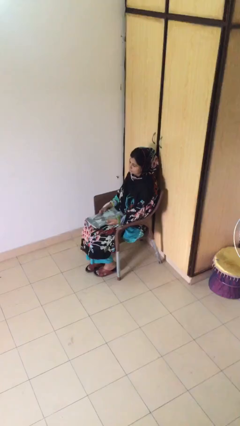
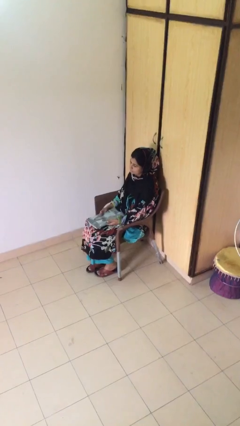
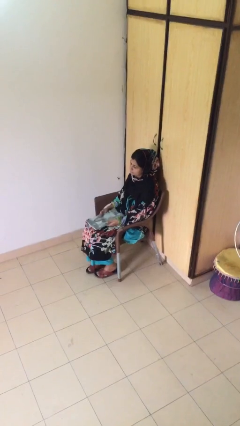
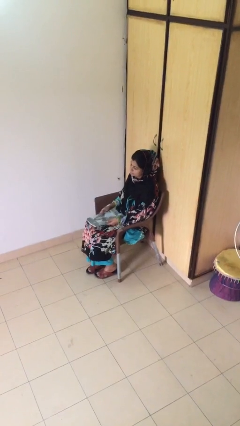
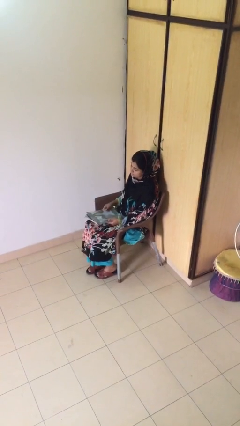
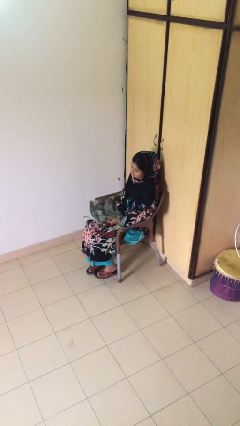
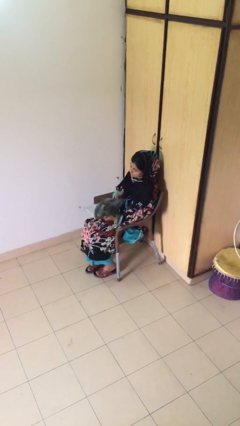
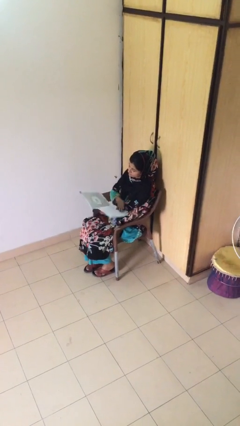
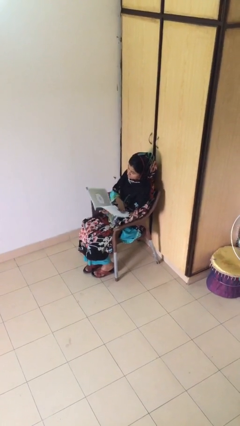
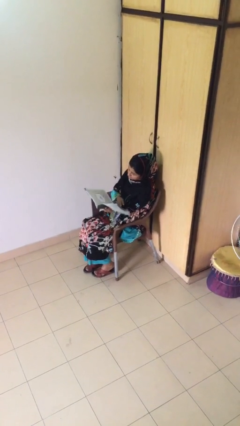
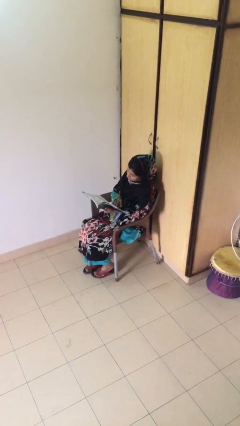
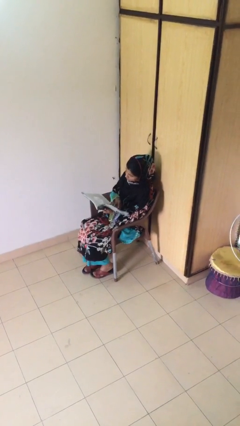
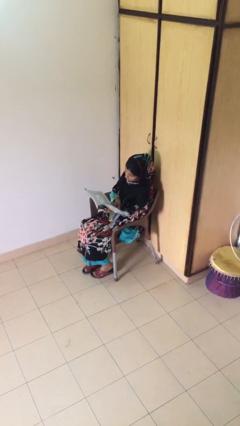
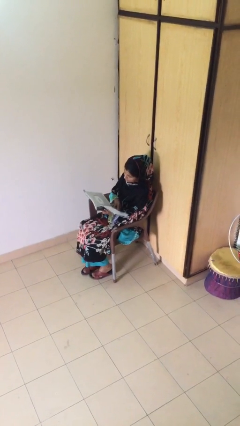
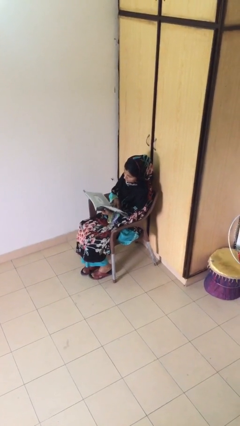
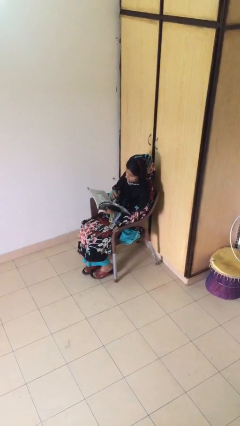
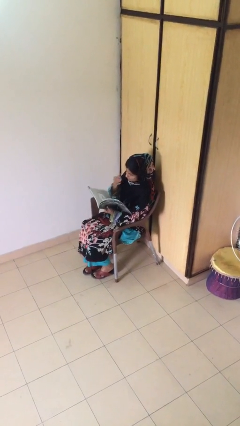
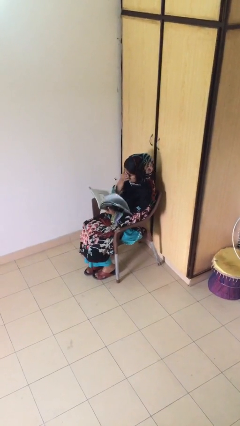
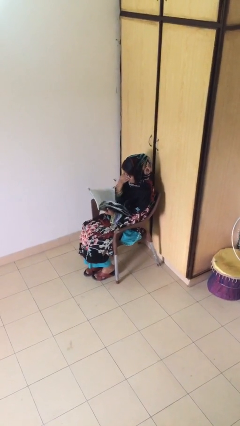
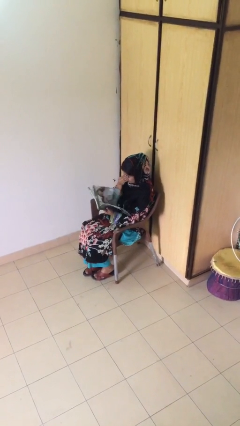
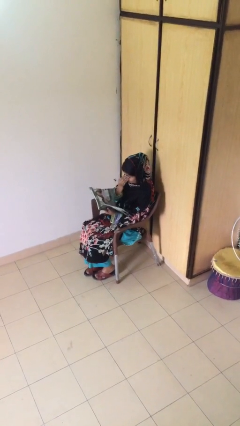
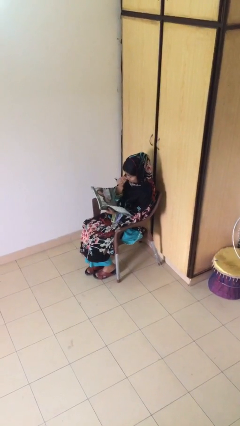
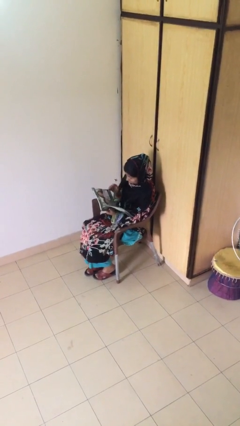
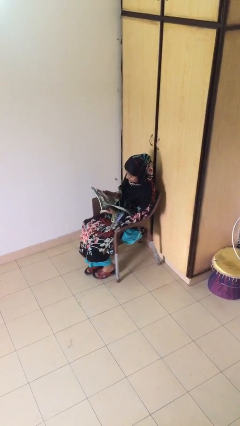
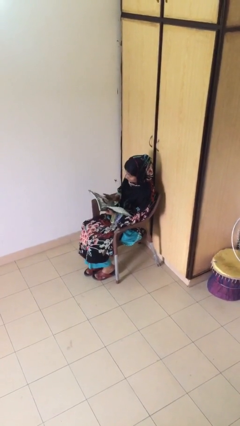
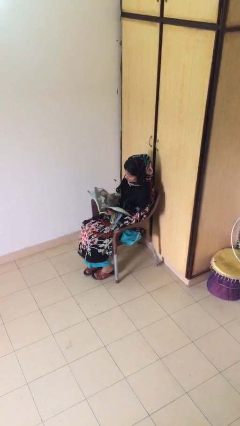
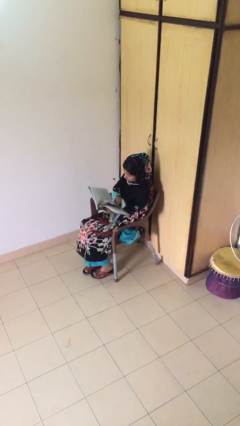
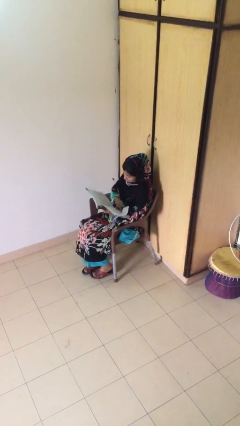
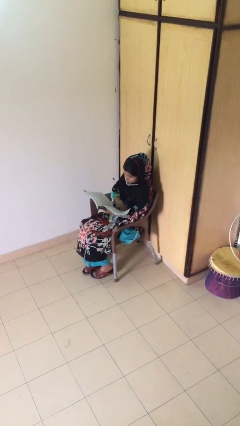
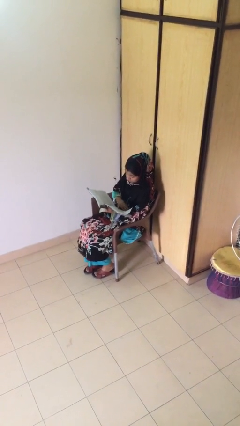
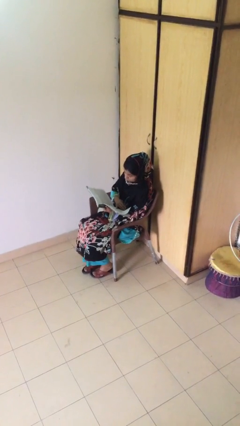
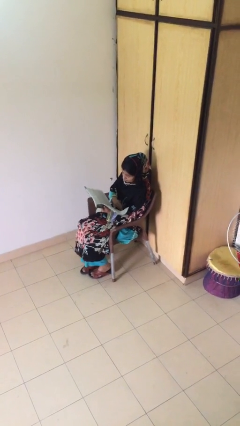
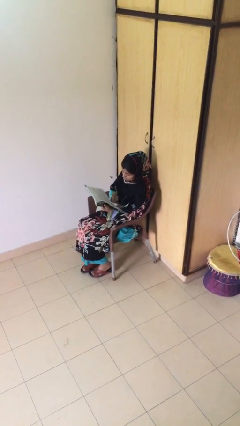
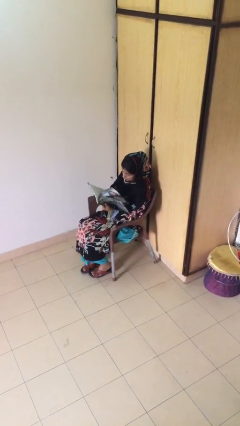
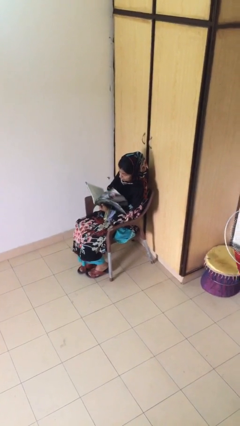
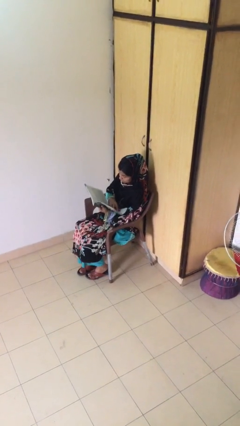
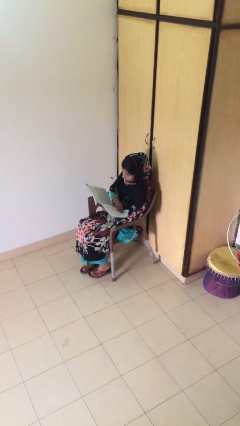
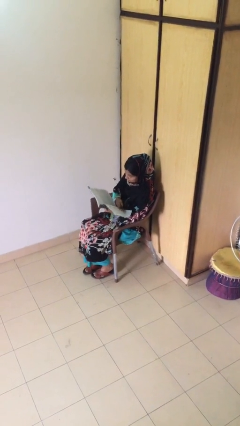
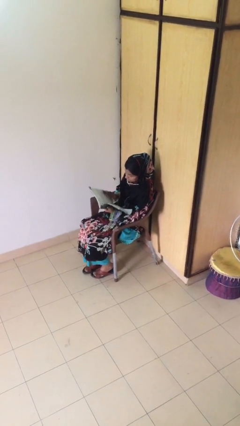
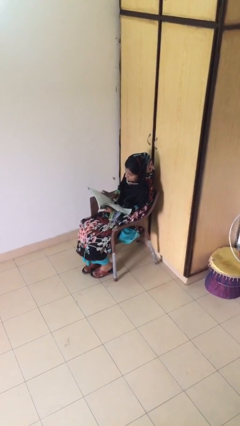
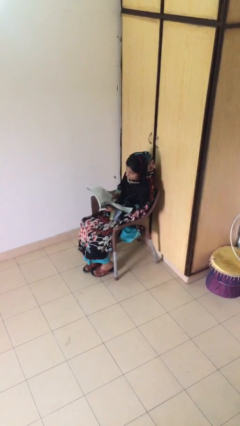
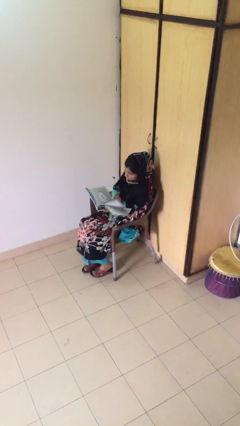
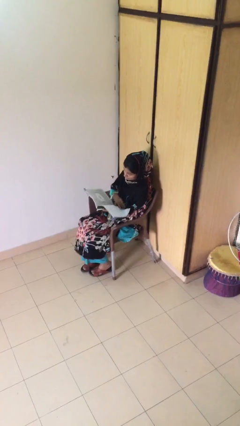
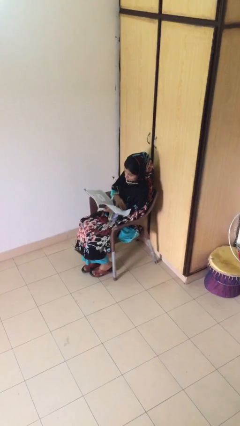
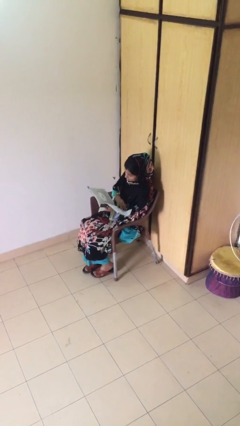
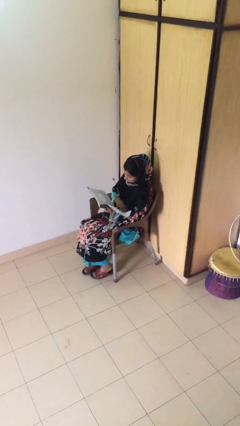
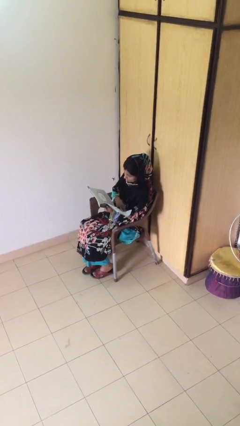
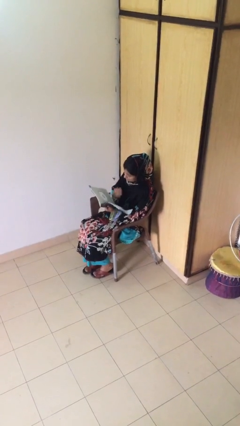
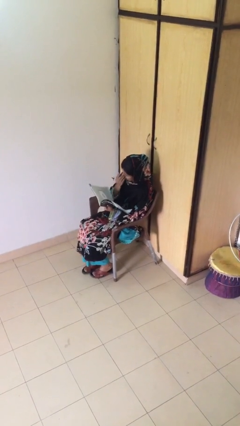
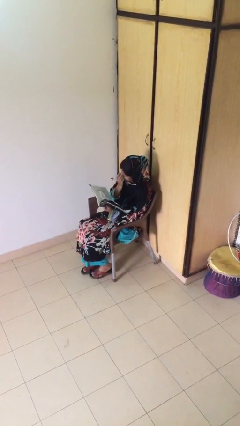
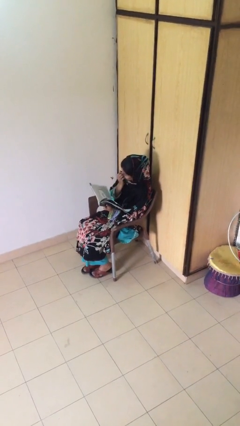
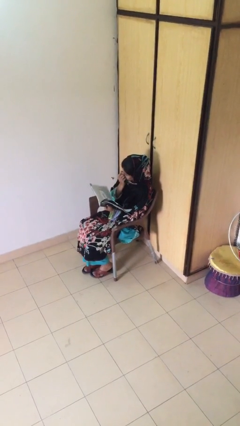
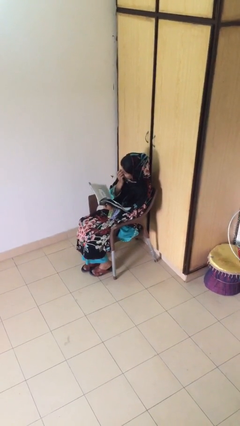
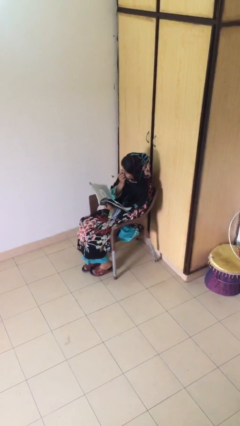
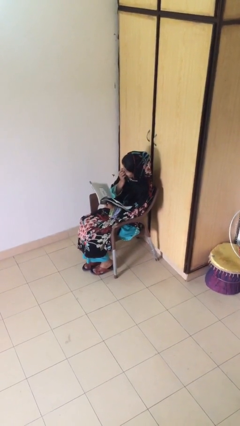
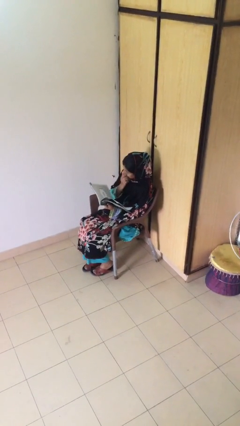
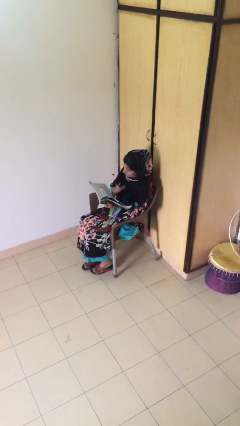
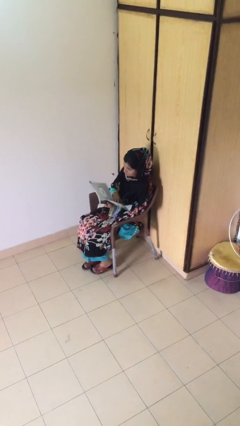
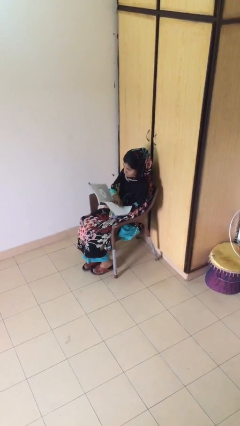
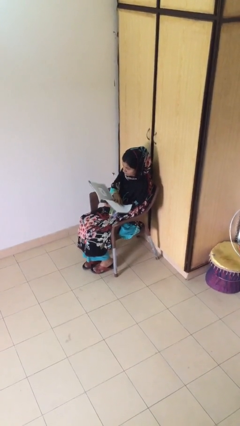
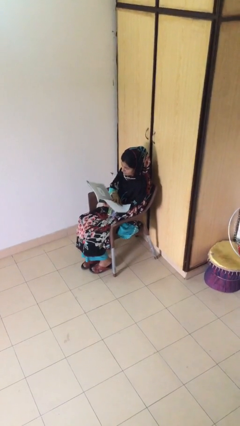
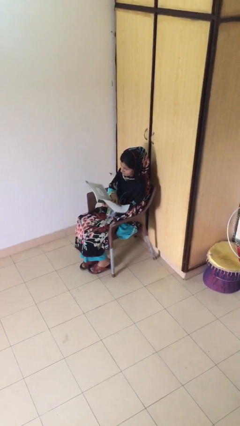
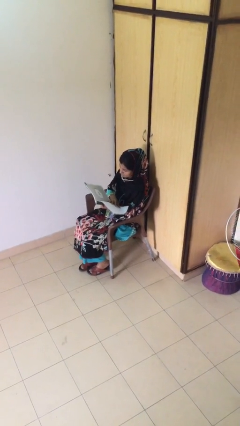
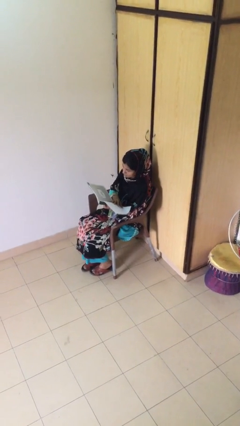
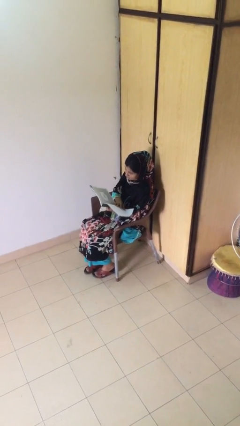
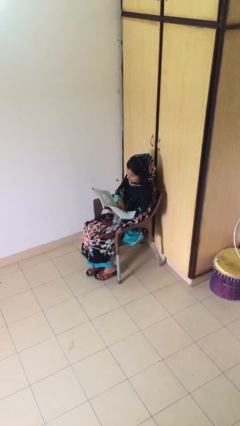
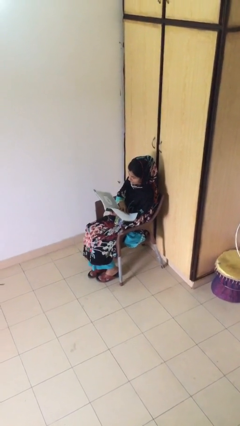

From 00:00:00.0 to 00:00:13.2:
person reads document

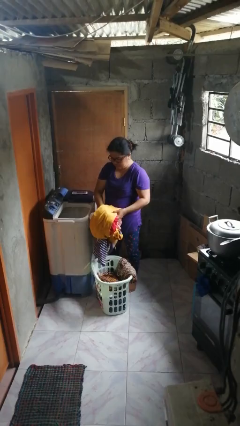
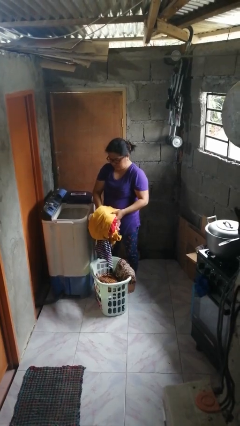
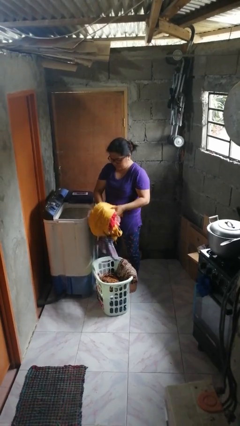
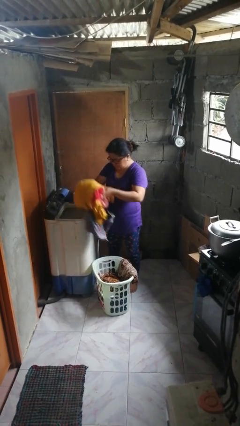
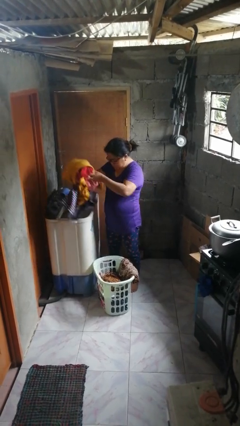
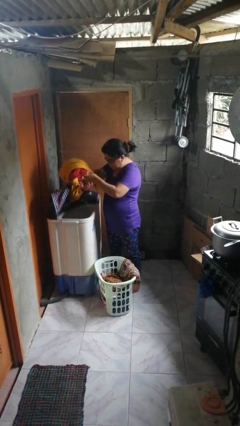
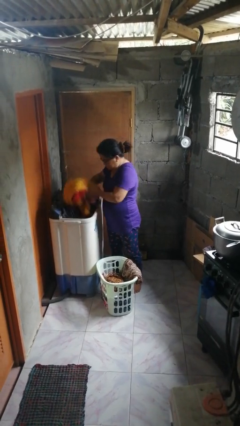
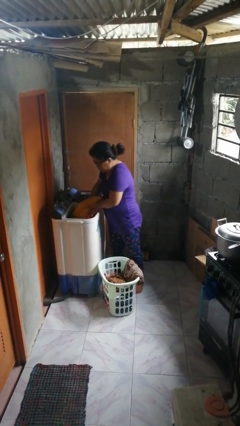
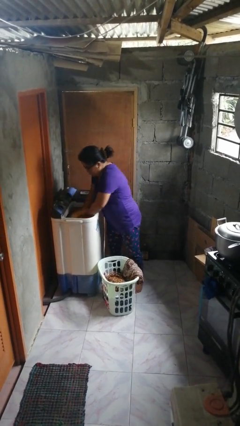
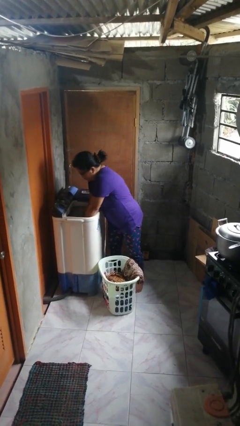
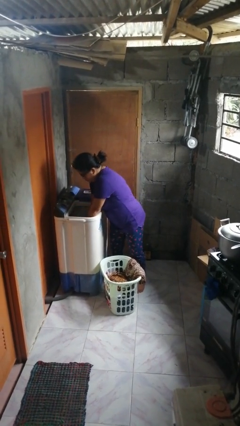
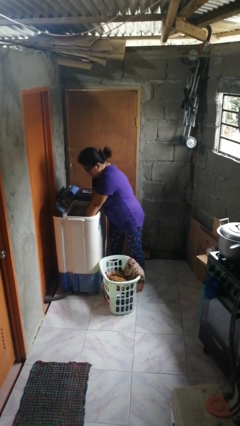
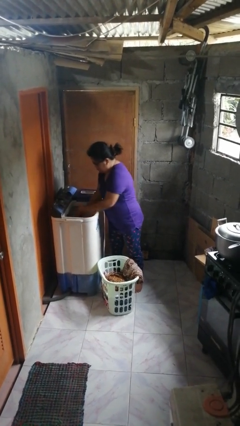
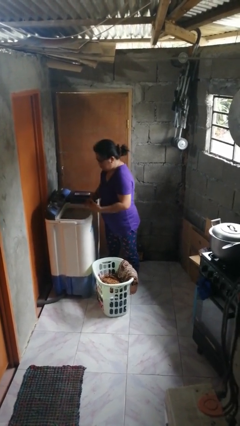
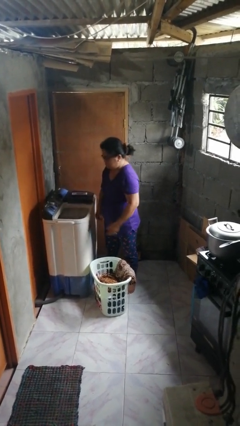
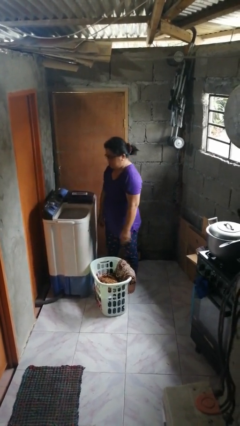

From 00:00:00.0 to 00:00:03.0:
person loads clotheswasher

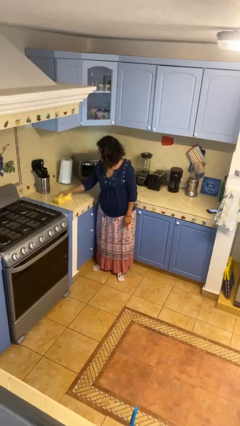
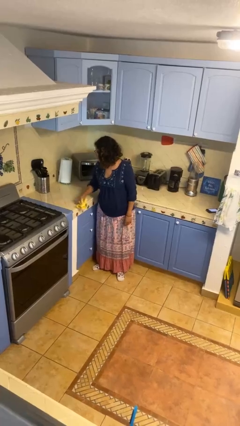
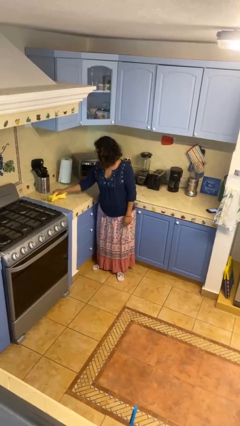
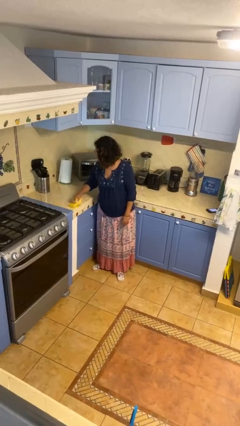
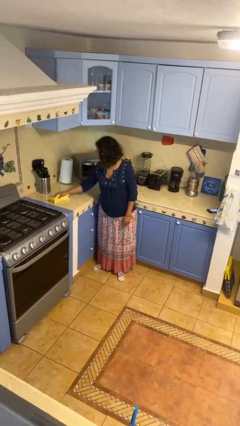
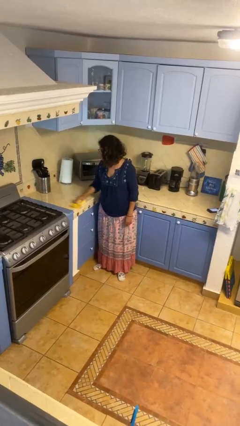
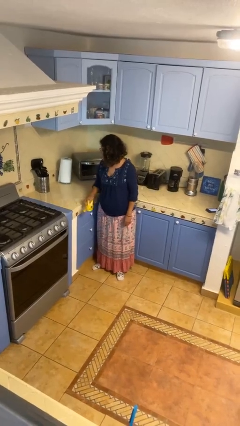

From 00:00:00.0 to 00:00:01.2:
person cleans table with rag

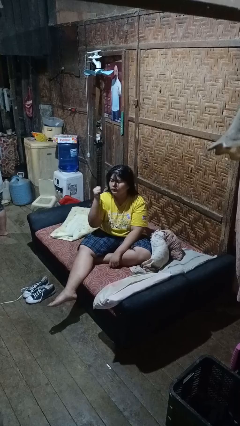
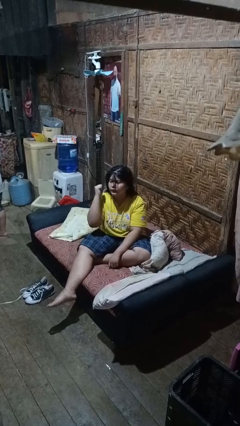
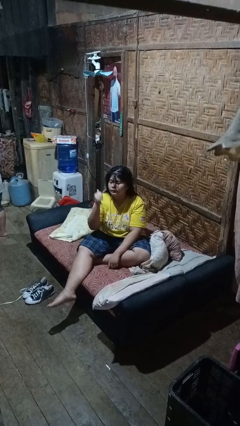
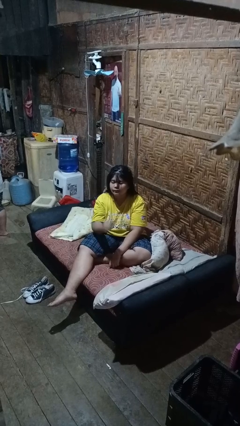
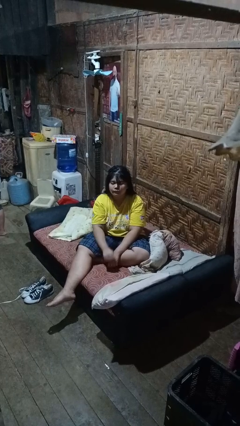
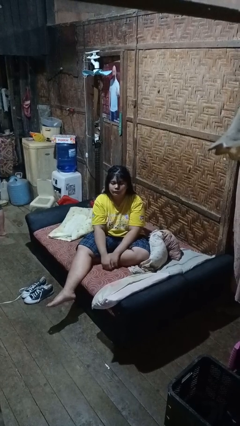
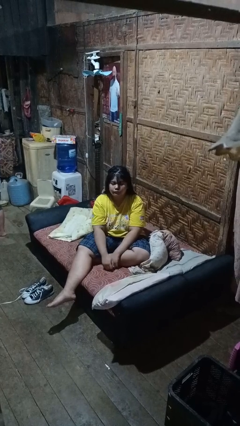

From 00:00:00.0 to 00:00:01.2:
person gestures behind me
